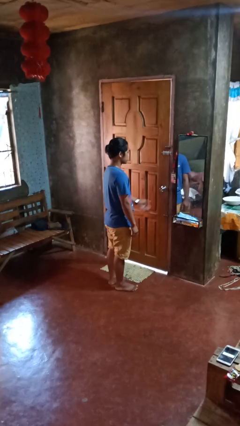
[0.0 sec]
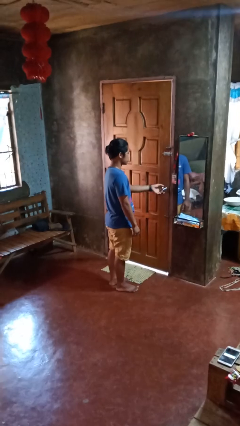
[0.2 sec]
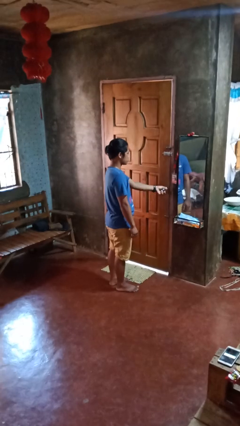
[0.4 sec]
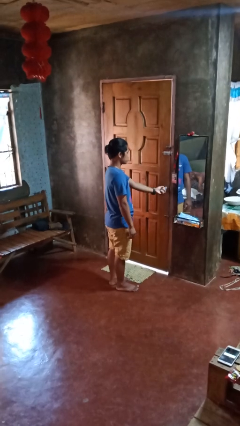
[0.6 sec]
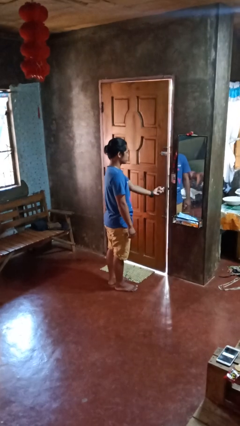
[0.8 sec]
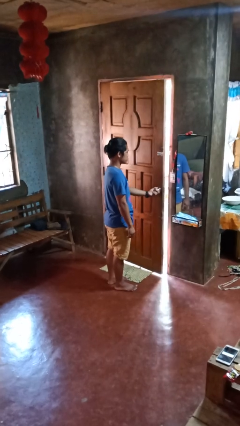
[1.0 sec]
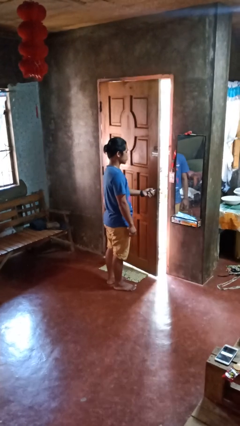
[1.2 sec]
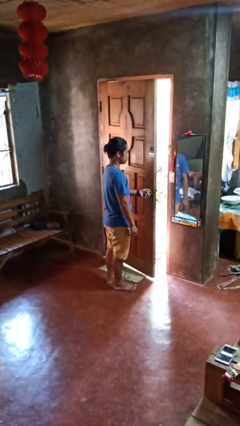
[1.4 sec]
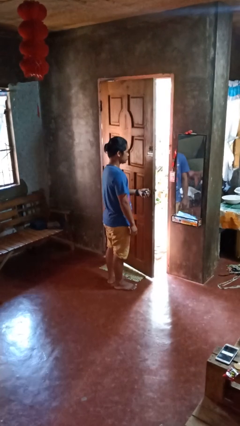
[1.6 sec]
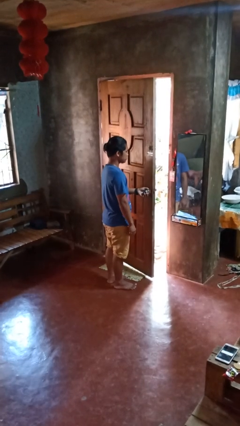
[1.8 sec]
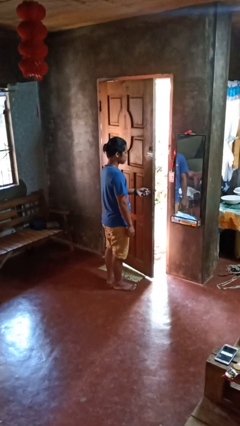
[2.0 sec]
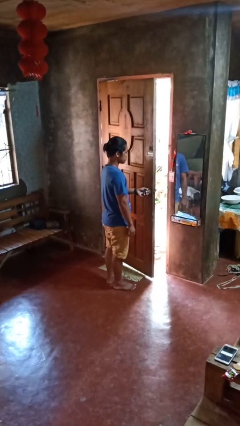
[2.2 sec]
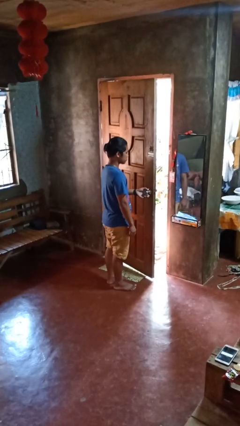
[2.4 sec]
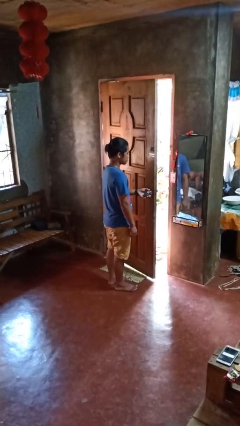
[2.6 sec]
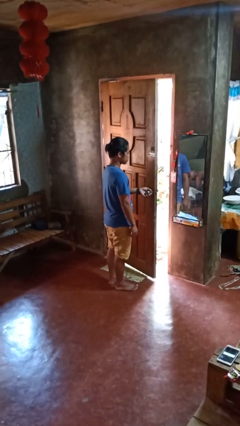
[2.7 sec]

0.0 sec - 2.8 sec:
person opens facility door

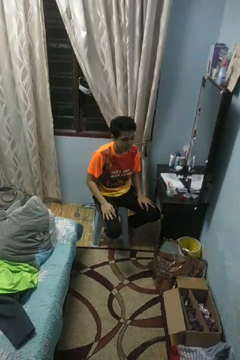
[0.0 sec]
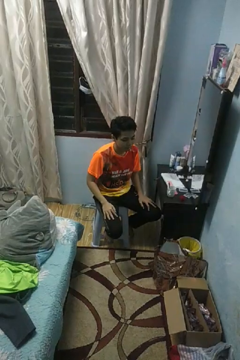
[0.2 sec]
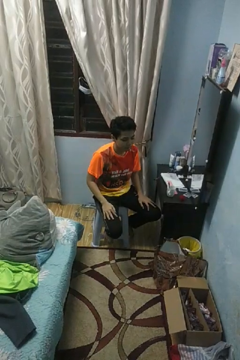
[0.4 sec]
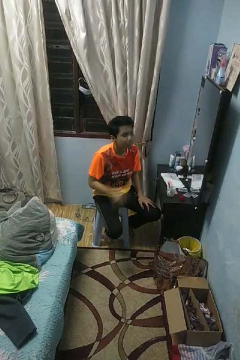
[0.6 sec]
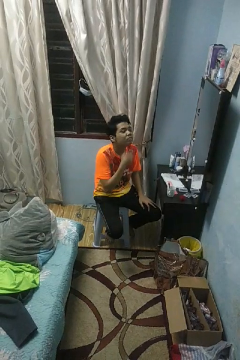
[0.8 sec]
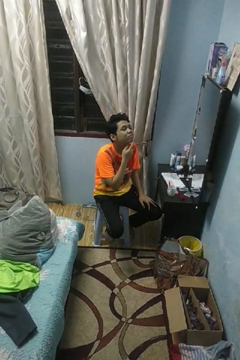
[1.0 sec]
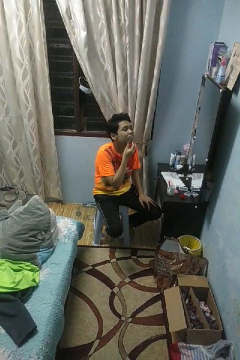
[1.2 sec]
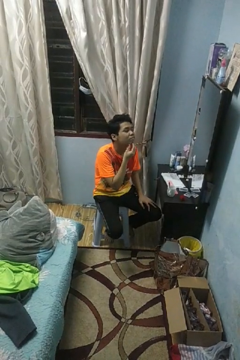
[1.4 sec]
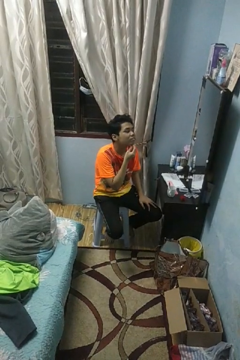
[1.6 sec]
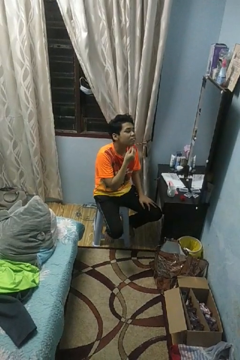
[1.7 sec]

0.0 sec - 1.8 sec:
person strokes chin

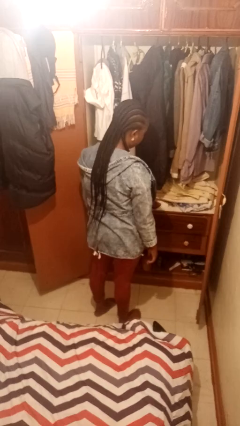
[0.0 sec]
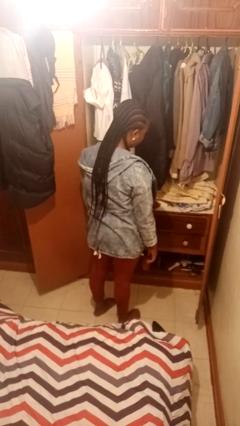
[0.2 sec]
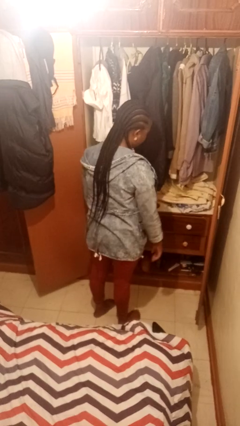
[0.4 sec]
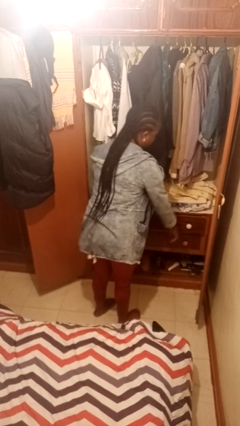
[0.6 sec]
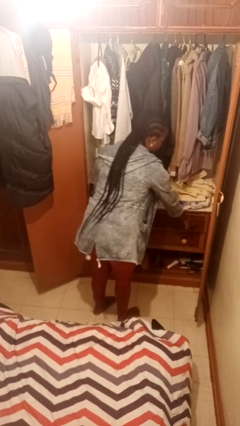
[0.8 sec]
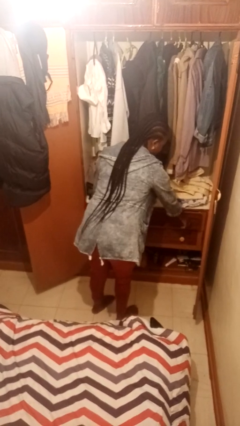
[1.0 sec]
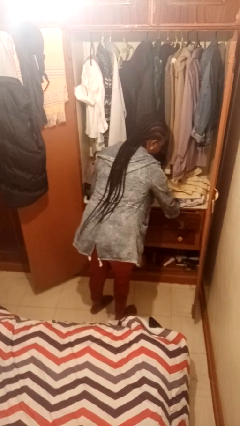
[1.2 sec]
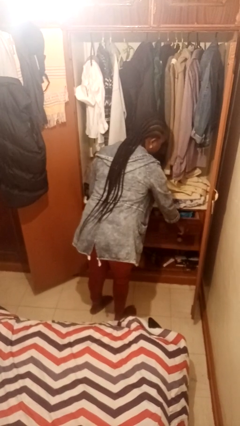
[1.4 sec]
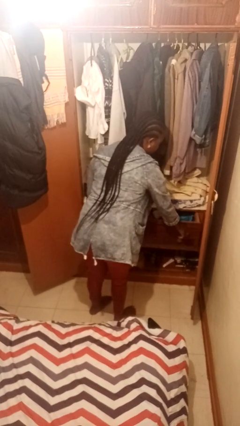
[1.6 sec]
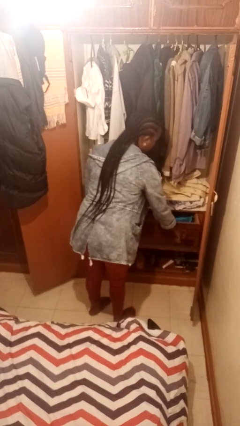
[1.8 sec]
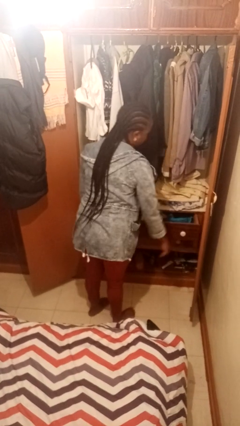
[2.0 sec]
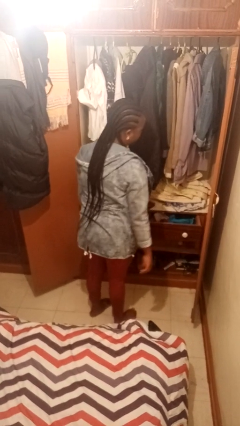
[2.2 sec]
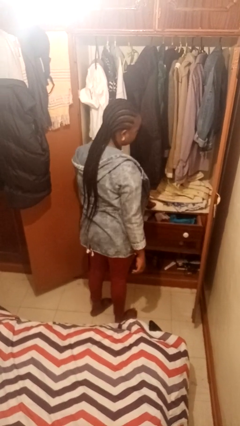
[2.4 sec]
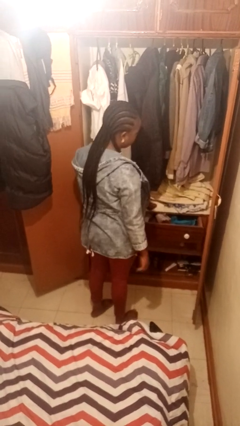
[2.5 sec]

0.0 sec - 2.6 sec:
person opens dresser drawer

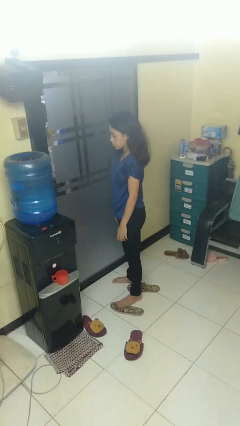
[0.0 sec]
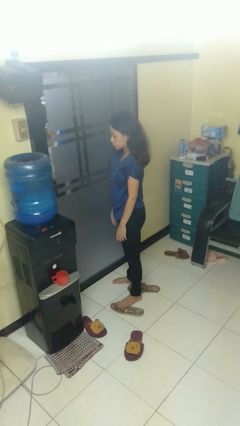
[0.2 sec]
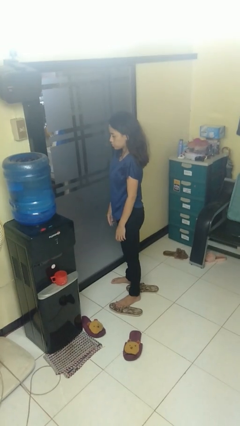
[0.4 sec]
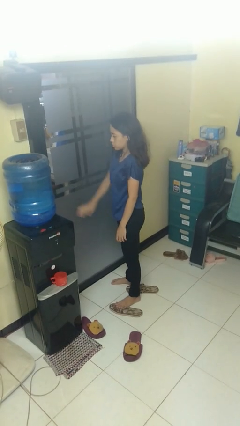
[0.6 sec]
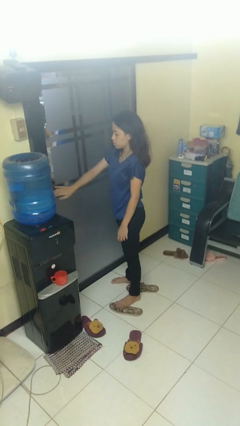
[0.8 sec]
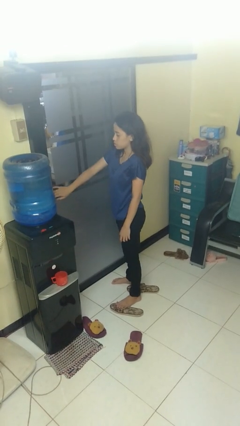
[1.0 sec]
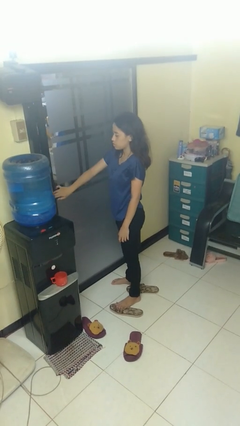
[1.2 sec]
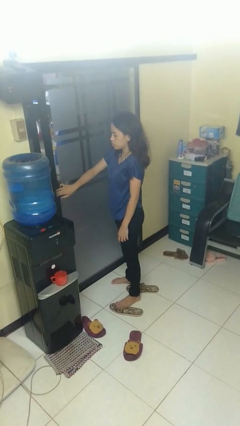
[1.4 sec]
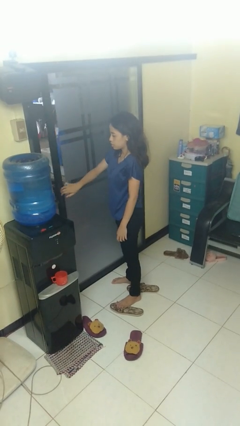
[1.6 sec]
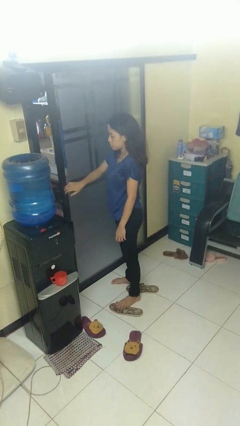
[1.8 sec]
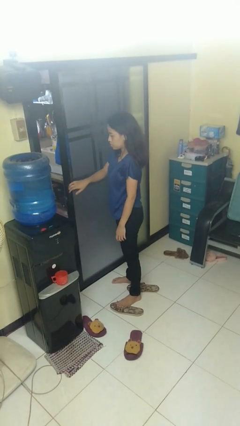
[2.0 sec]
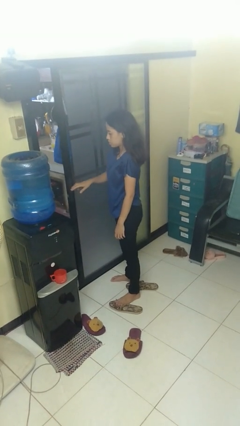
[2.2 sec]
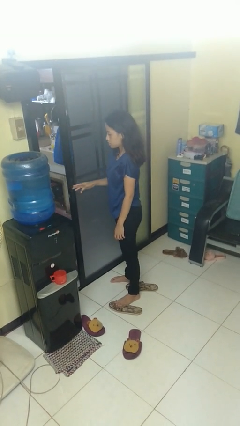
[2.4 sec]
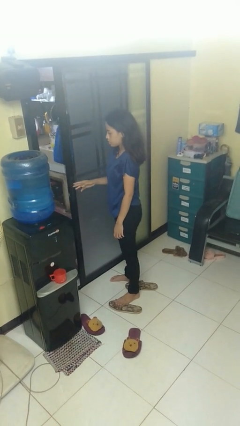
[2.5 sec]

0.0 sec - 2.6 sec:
person opens sliding door

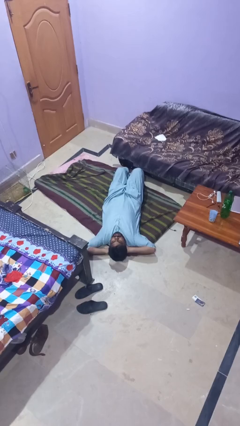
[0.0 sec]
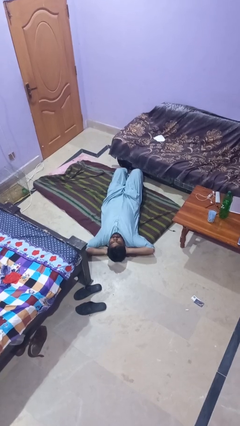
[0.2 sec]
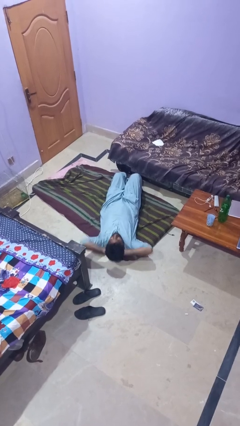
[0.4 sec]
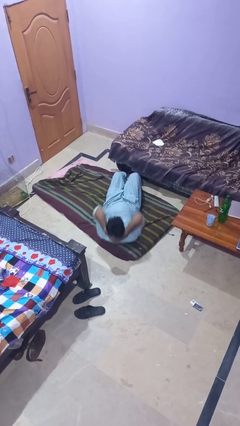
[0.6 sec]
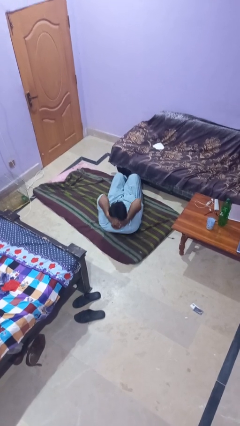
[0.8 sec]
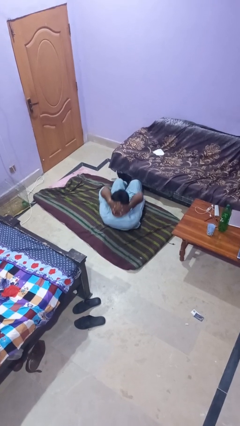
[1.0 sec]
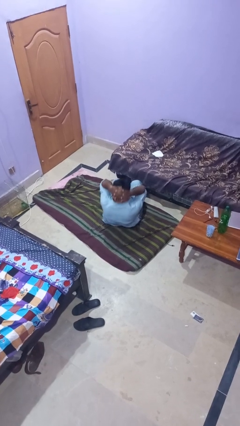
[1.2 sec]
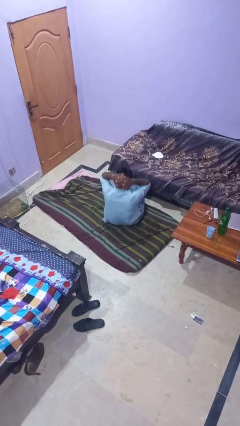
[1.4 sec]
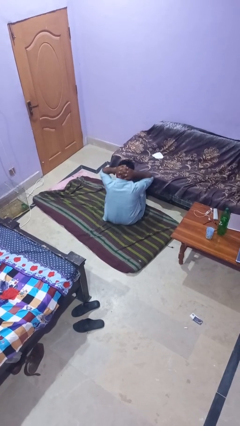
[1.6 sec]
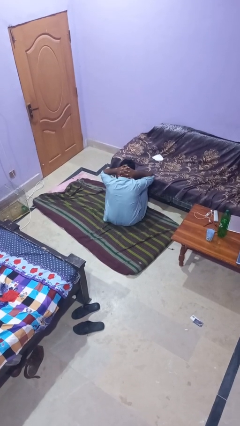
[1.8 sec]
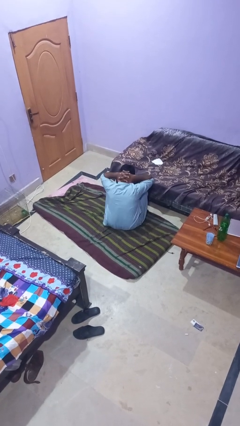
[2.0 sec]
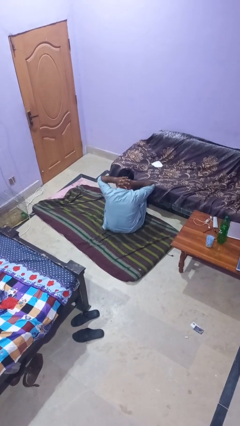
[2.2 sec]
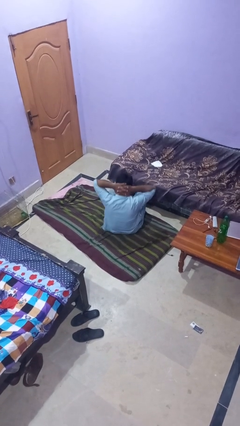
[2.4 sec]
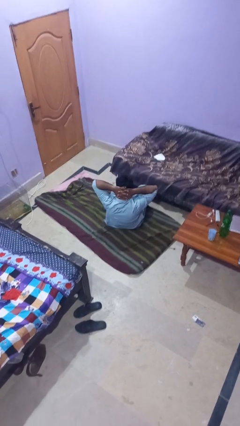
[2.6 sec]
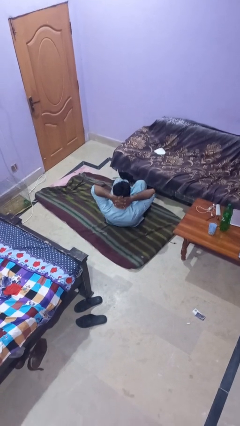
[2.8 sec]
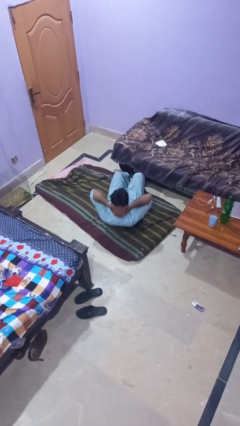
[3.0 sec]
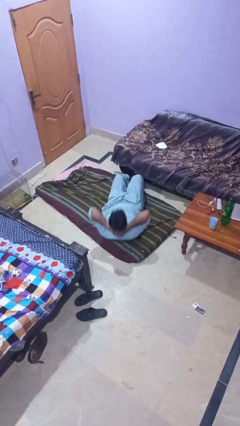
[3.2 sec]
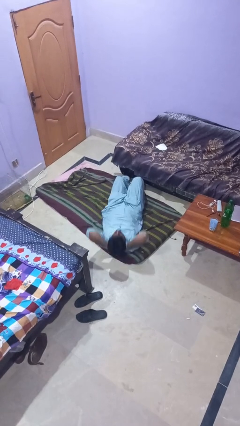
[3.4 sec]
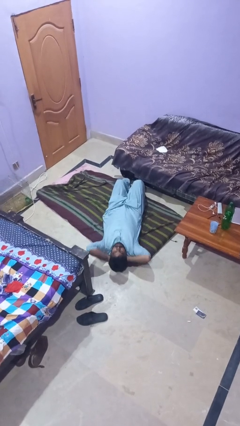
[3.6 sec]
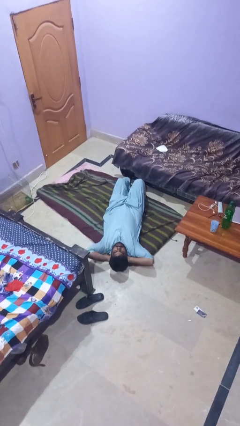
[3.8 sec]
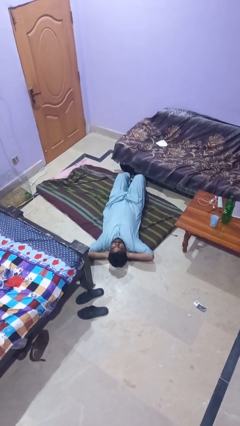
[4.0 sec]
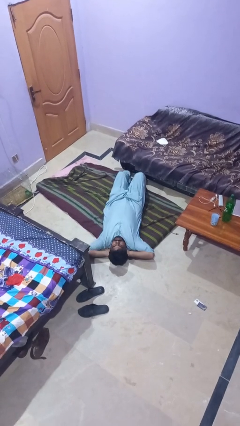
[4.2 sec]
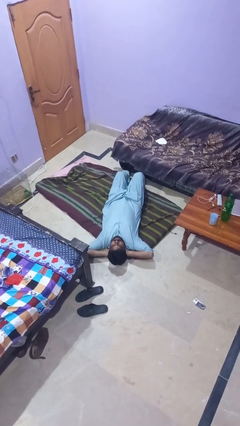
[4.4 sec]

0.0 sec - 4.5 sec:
person exercises with situp

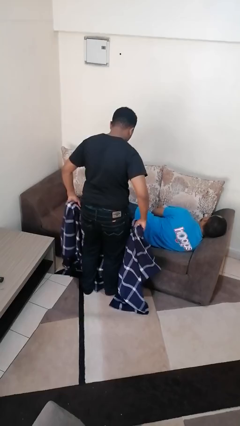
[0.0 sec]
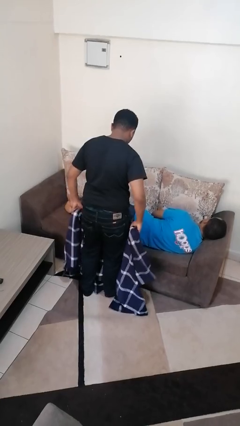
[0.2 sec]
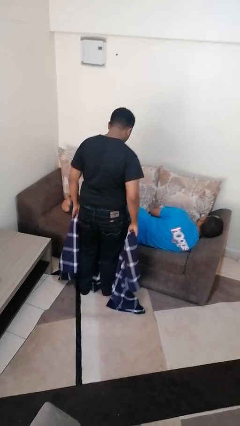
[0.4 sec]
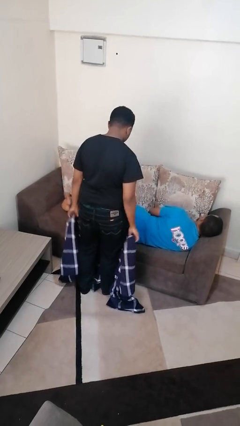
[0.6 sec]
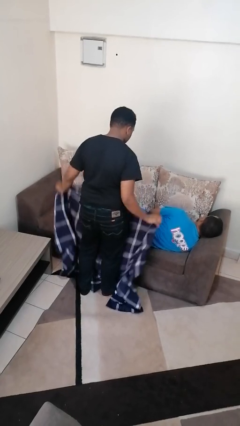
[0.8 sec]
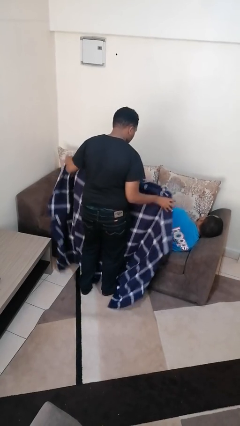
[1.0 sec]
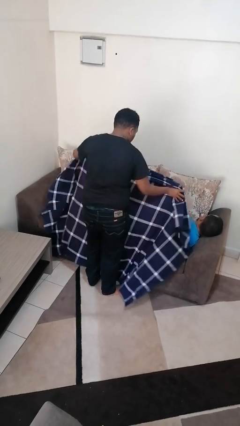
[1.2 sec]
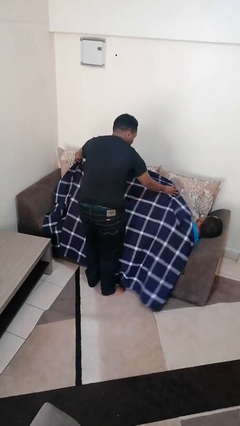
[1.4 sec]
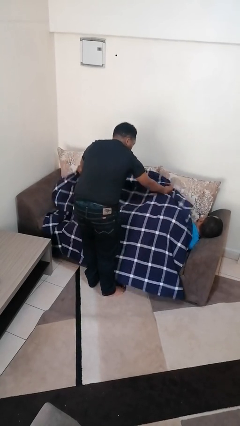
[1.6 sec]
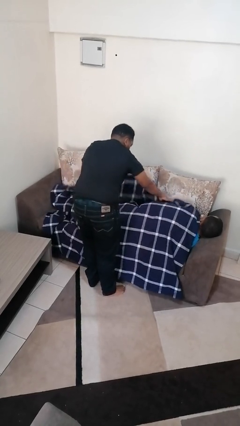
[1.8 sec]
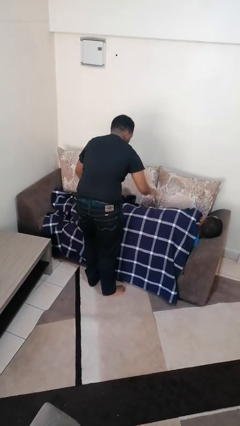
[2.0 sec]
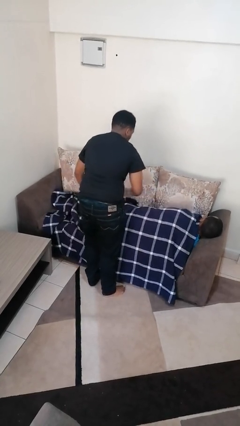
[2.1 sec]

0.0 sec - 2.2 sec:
person covers friend with blanket

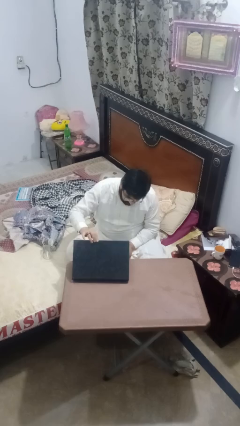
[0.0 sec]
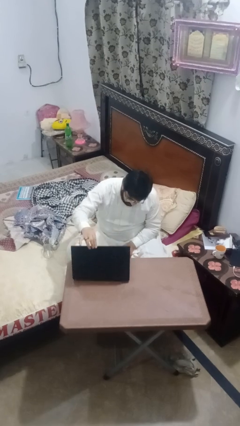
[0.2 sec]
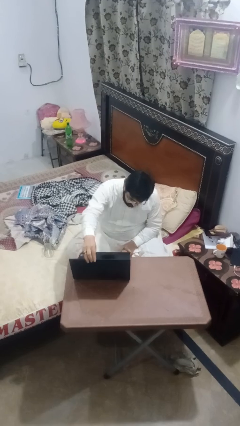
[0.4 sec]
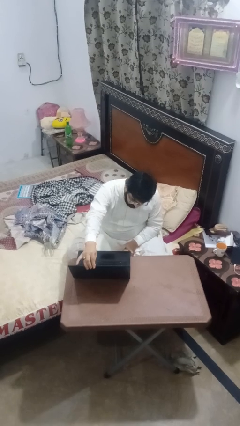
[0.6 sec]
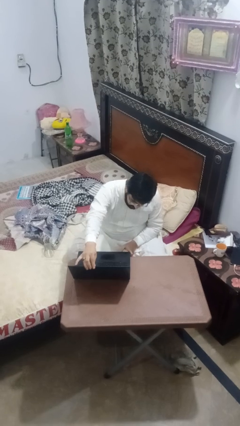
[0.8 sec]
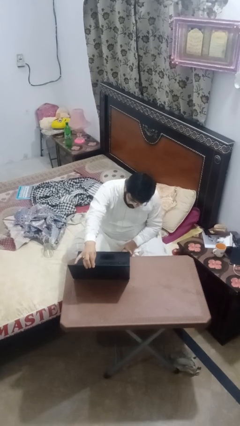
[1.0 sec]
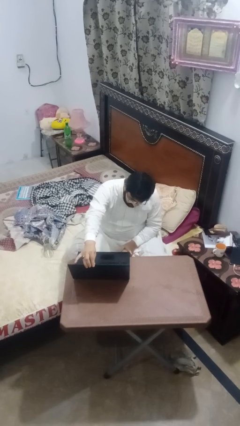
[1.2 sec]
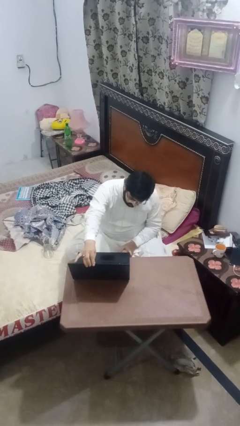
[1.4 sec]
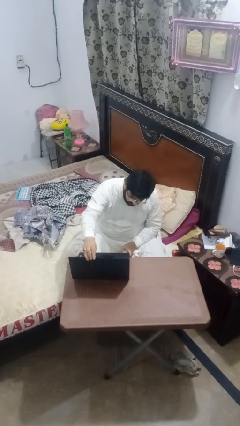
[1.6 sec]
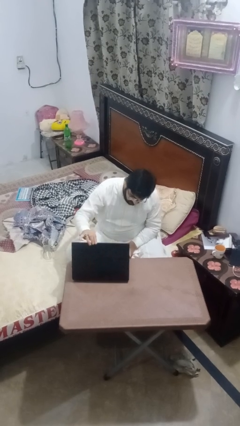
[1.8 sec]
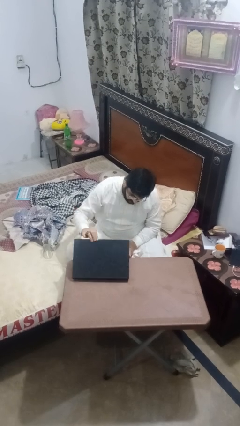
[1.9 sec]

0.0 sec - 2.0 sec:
person opens laptop
